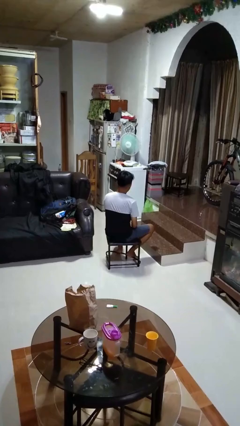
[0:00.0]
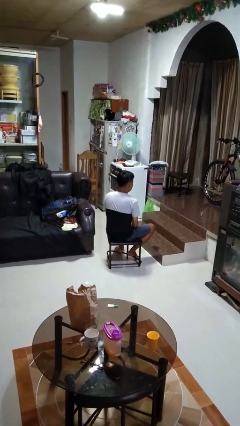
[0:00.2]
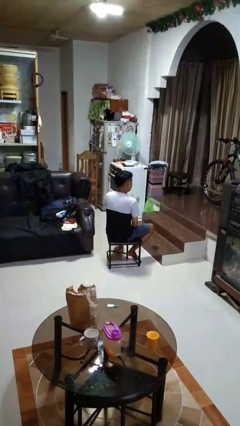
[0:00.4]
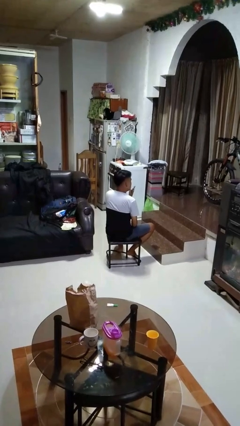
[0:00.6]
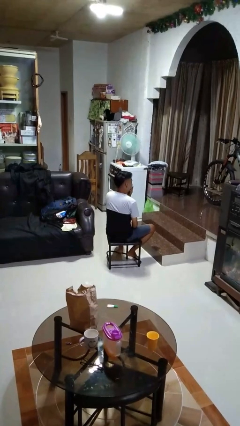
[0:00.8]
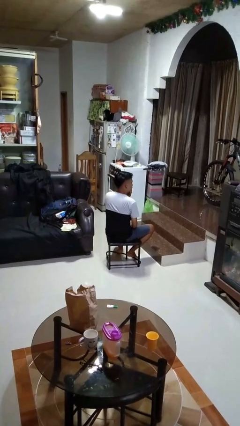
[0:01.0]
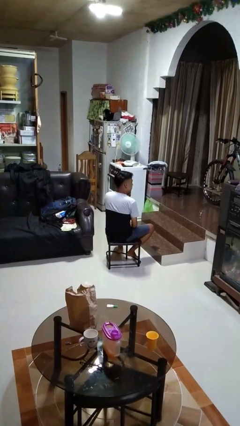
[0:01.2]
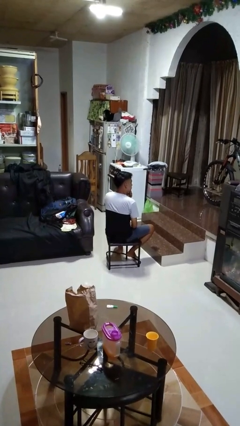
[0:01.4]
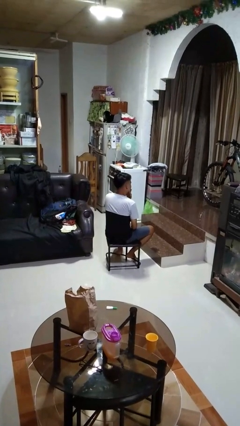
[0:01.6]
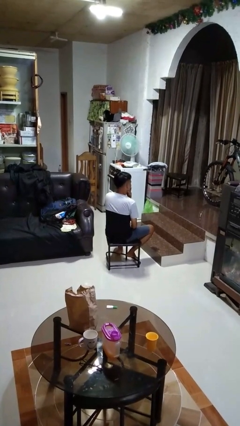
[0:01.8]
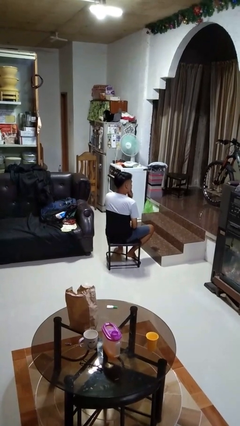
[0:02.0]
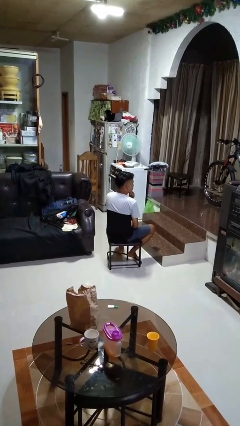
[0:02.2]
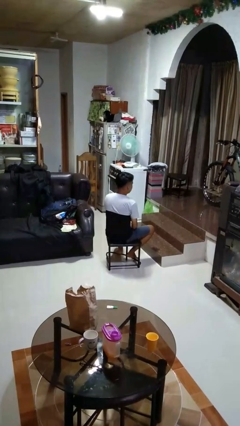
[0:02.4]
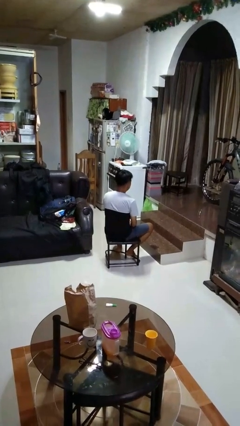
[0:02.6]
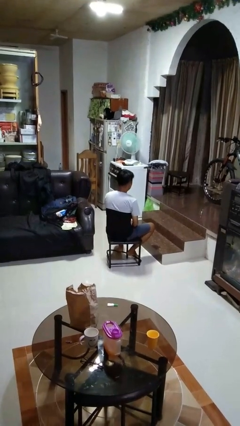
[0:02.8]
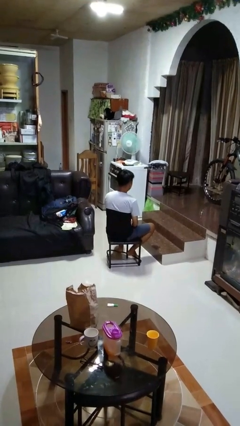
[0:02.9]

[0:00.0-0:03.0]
person strokes chin

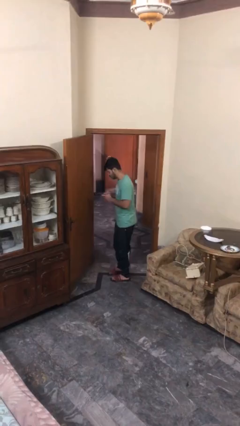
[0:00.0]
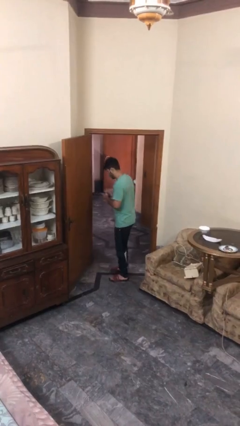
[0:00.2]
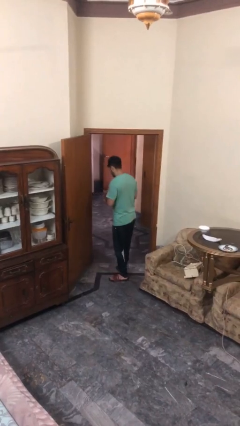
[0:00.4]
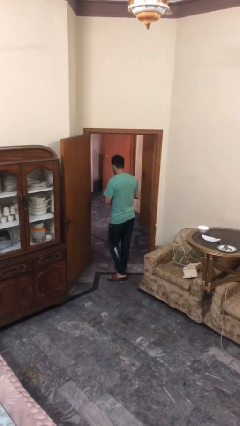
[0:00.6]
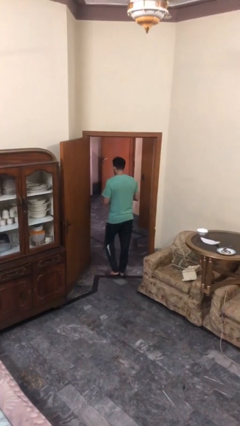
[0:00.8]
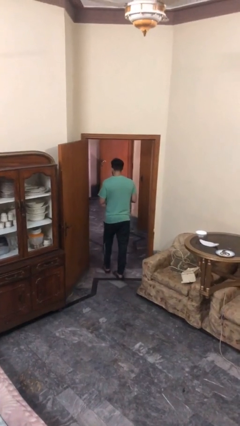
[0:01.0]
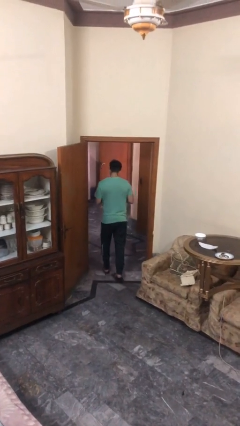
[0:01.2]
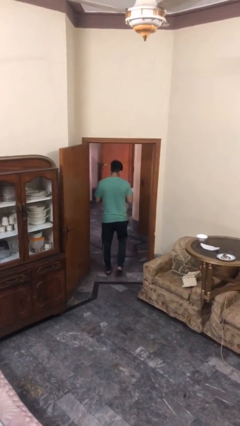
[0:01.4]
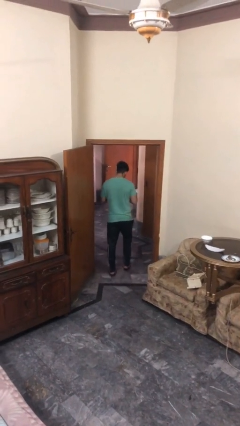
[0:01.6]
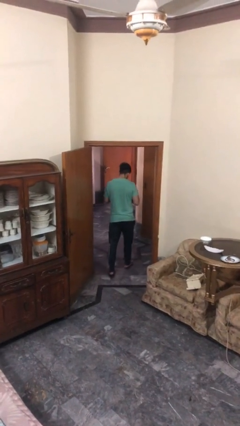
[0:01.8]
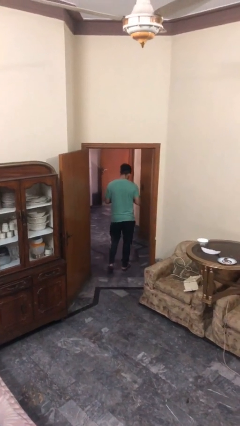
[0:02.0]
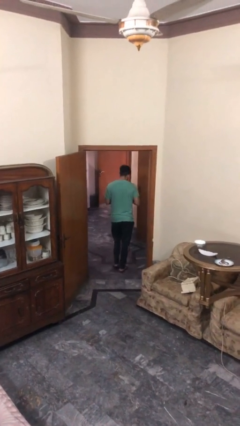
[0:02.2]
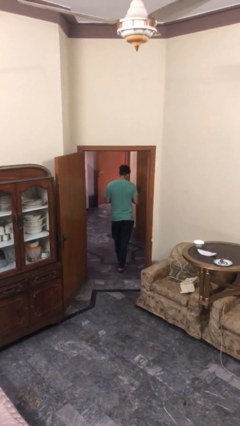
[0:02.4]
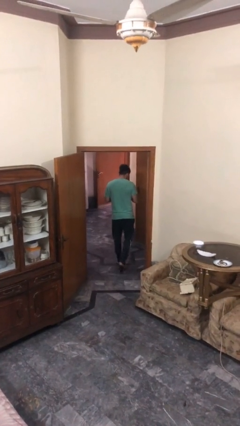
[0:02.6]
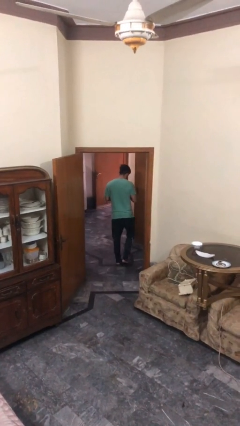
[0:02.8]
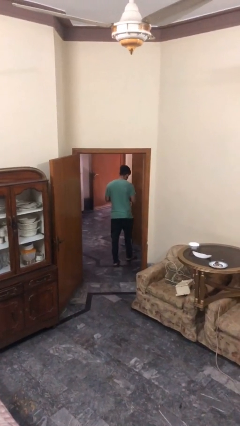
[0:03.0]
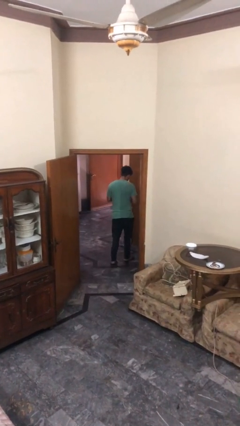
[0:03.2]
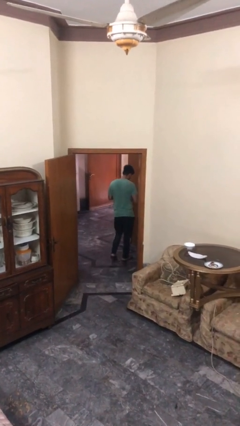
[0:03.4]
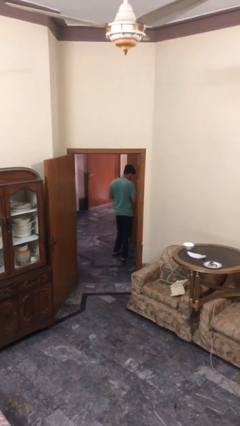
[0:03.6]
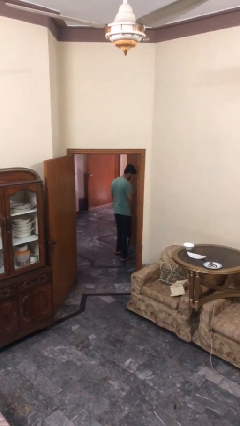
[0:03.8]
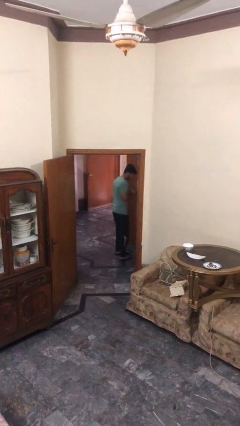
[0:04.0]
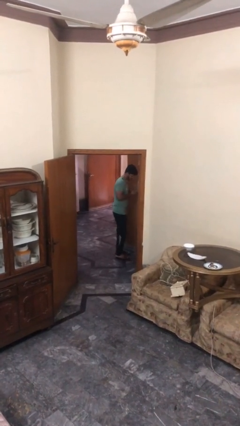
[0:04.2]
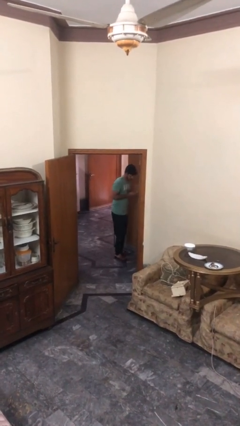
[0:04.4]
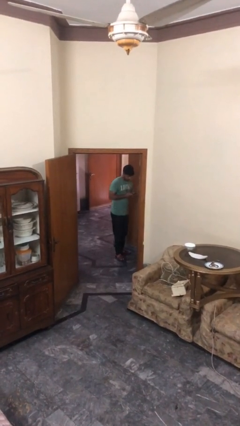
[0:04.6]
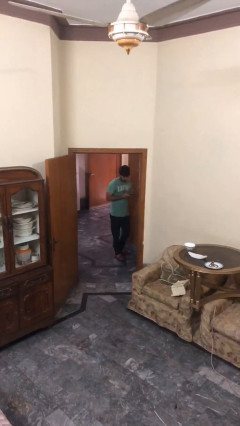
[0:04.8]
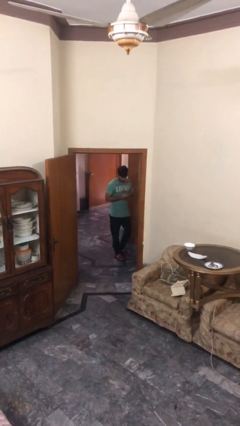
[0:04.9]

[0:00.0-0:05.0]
person exits scene through structure

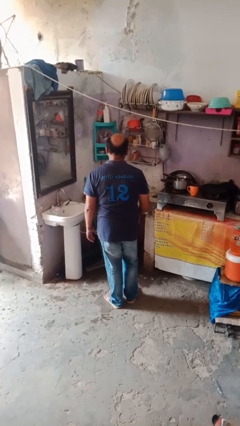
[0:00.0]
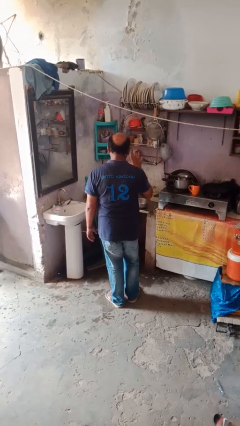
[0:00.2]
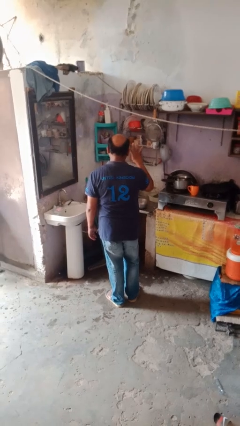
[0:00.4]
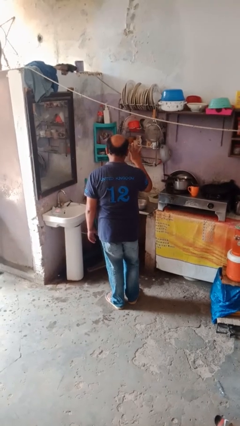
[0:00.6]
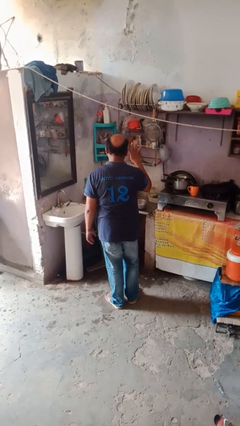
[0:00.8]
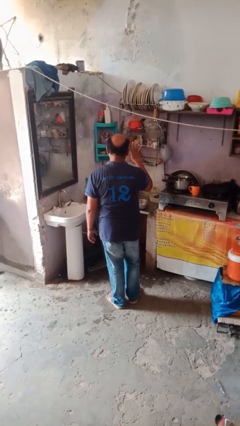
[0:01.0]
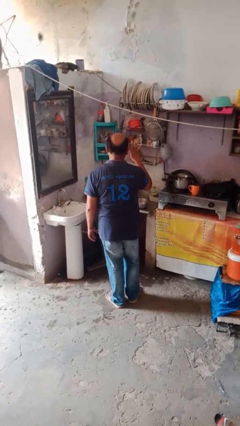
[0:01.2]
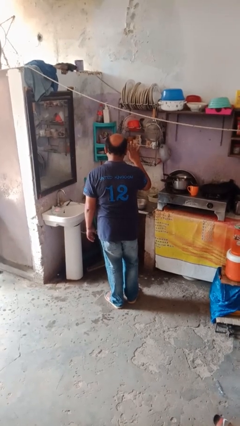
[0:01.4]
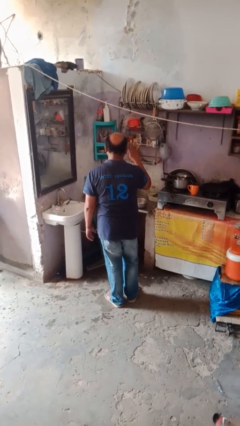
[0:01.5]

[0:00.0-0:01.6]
person gestures number four

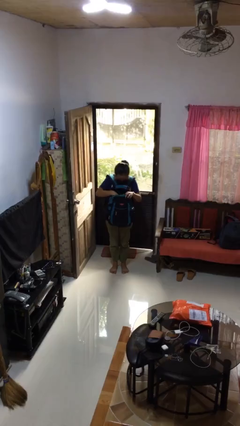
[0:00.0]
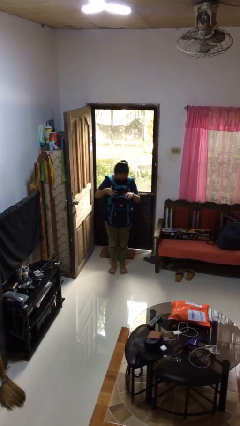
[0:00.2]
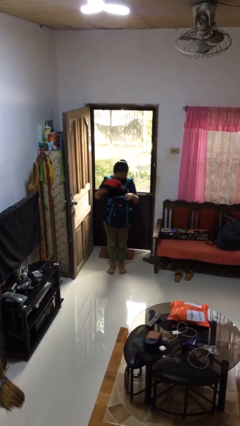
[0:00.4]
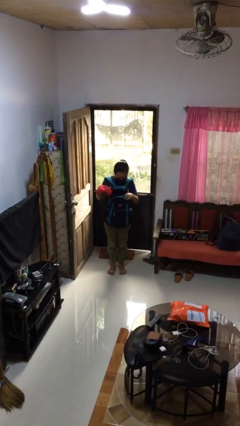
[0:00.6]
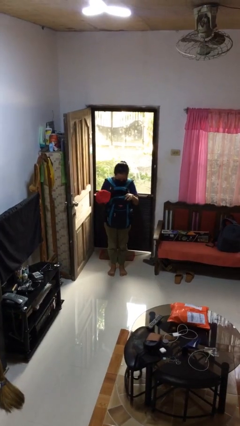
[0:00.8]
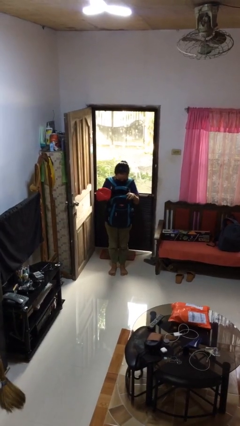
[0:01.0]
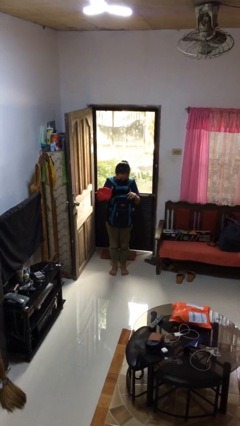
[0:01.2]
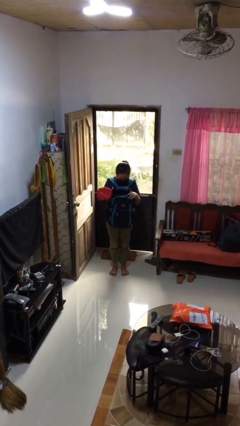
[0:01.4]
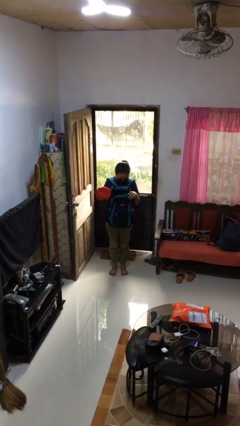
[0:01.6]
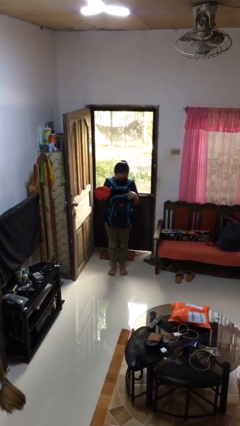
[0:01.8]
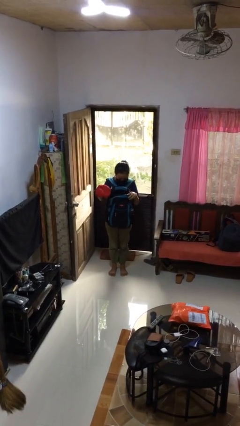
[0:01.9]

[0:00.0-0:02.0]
person takes object from backpack

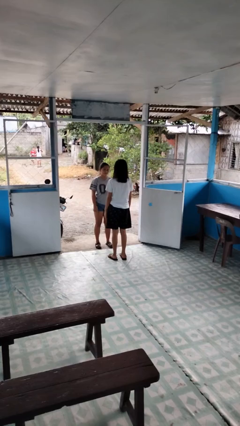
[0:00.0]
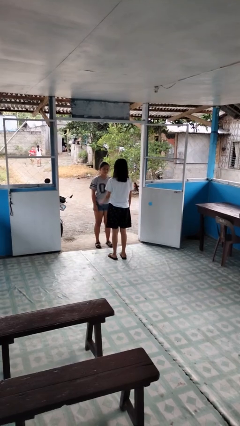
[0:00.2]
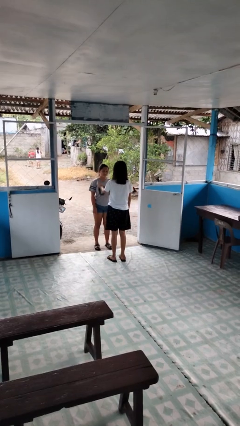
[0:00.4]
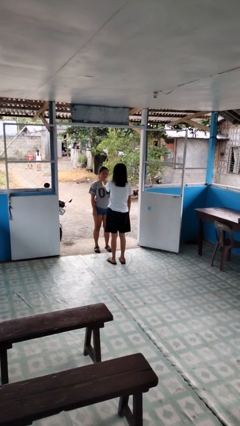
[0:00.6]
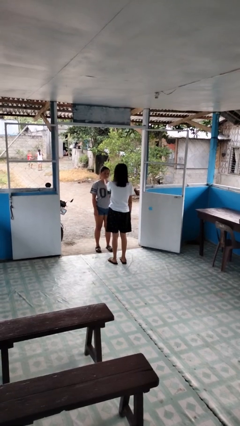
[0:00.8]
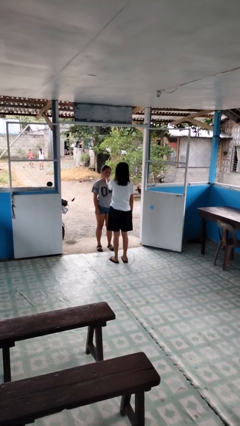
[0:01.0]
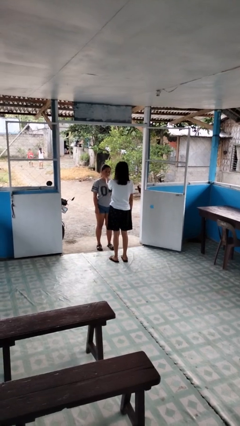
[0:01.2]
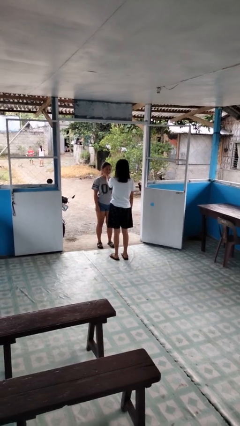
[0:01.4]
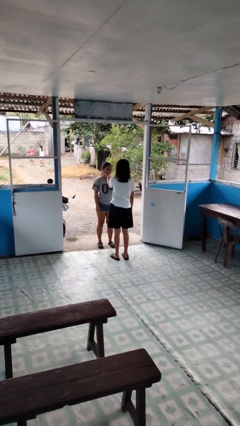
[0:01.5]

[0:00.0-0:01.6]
person touches face of person

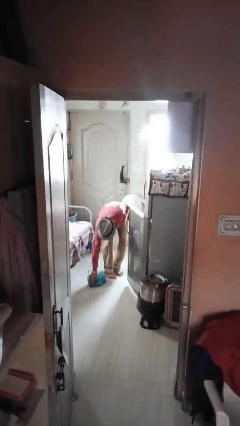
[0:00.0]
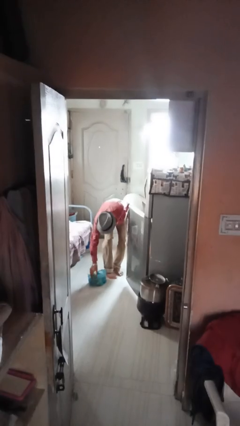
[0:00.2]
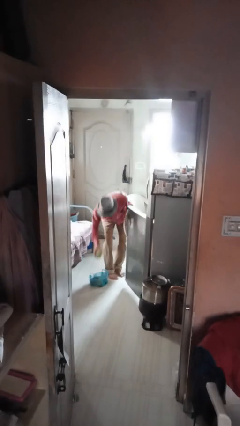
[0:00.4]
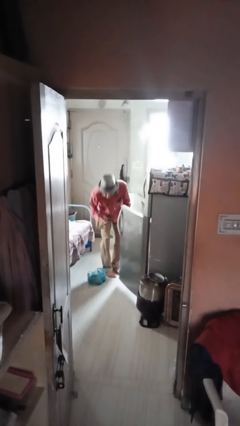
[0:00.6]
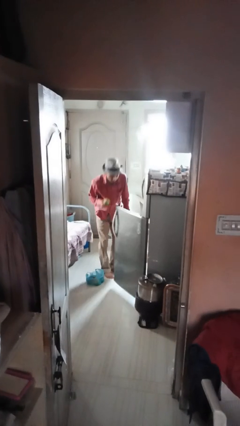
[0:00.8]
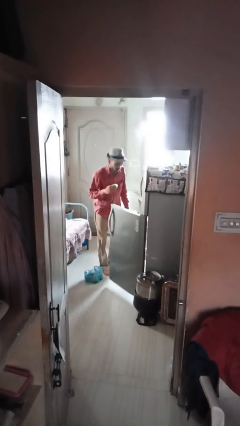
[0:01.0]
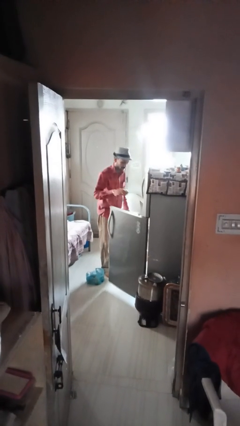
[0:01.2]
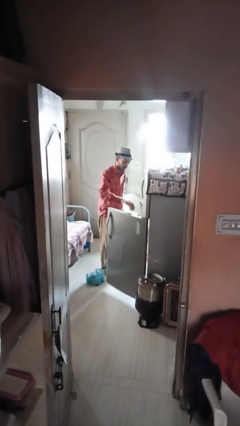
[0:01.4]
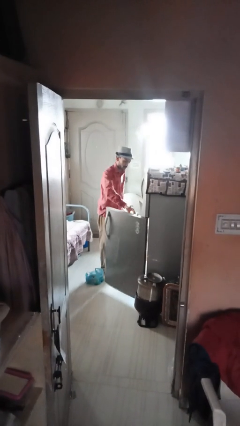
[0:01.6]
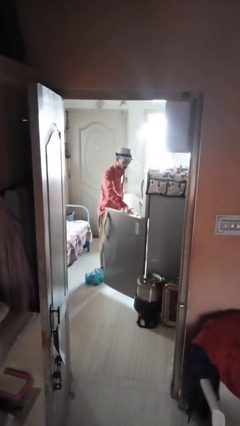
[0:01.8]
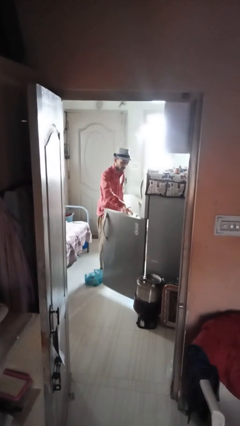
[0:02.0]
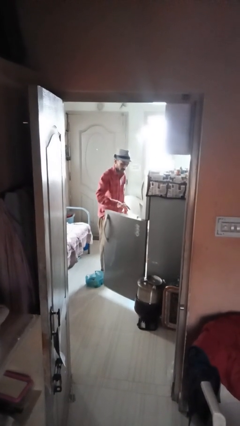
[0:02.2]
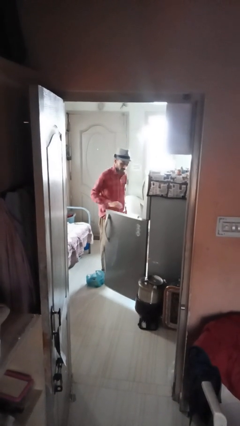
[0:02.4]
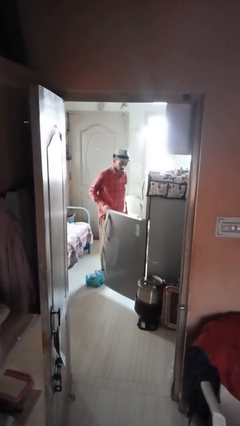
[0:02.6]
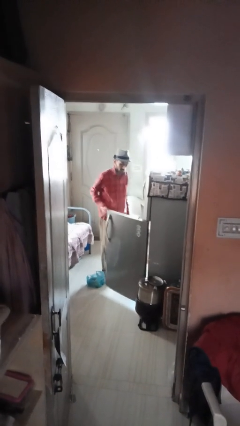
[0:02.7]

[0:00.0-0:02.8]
person loads groceries into refrigerator

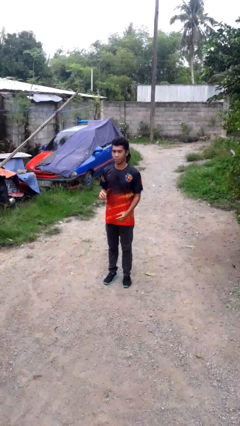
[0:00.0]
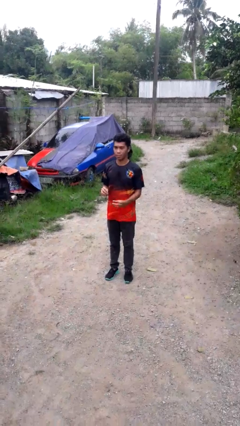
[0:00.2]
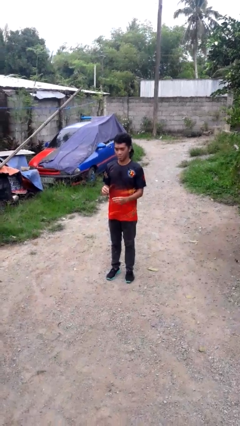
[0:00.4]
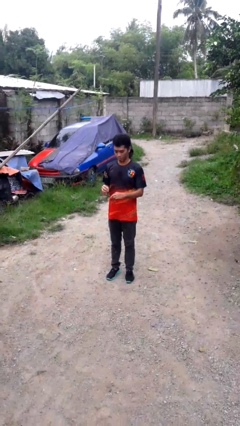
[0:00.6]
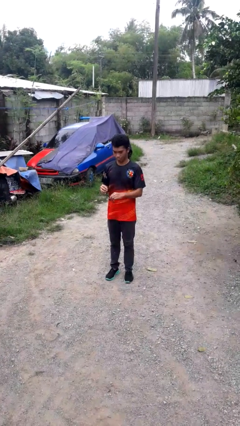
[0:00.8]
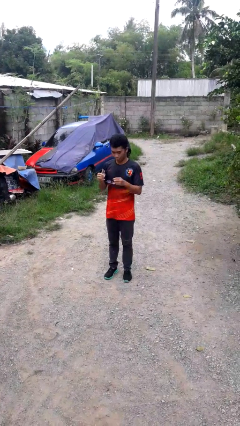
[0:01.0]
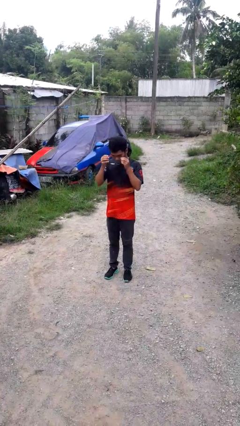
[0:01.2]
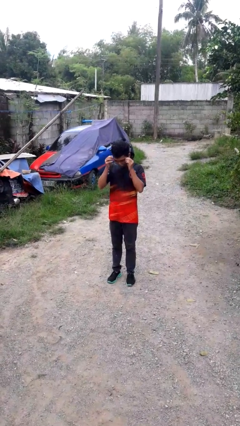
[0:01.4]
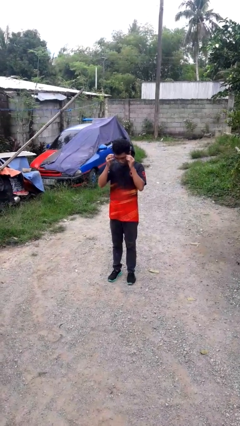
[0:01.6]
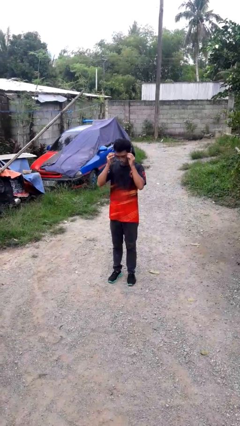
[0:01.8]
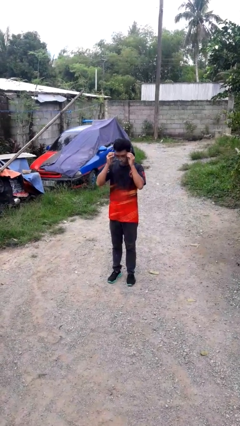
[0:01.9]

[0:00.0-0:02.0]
person puts on glasses
